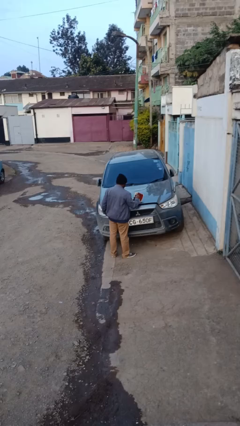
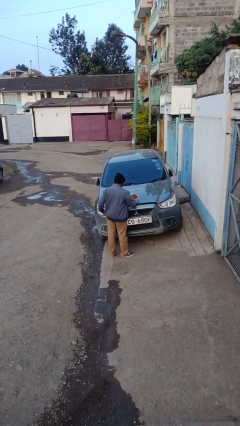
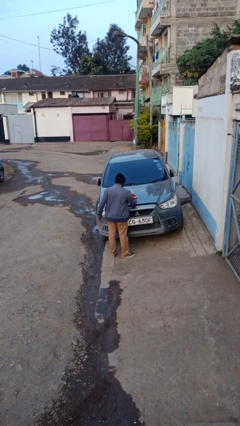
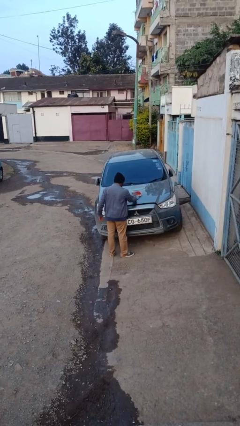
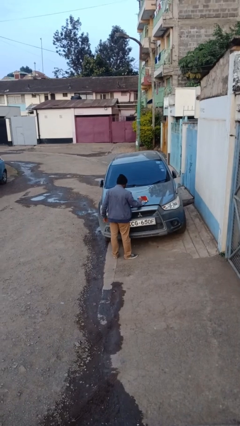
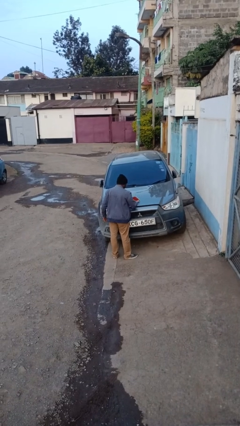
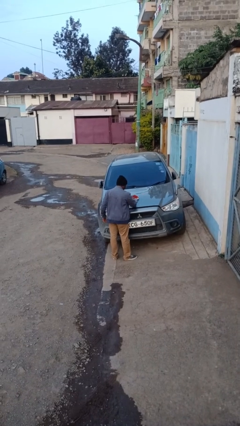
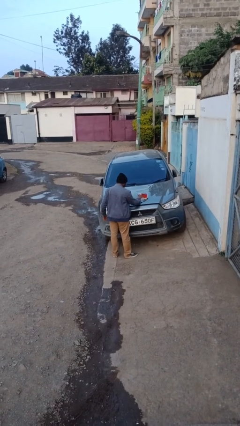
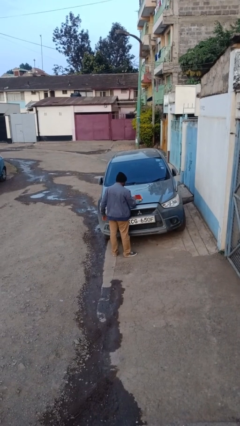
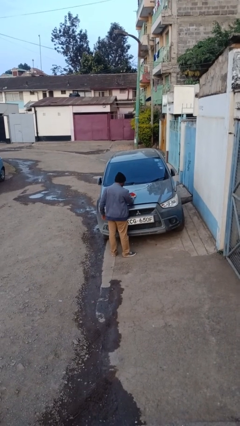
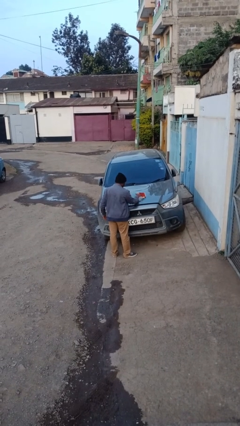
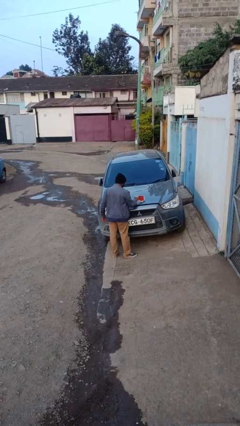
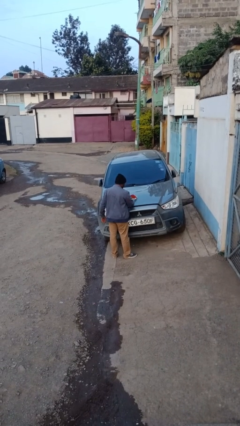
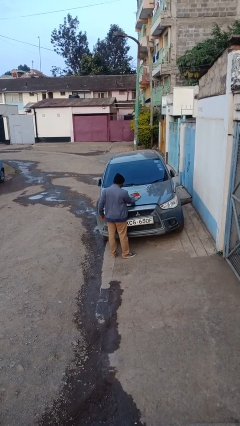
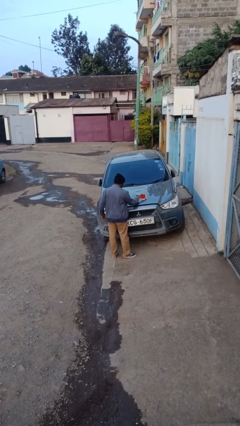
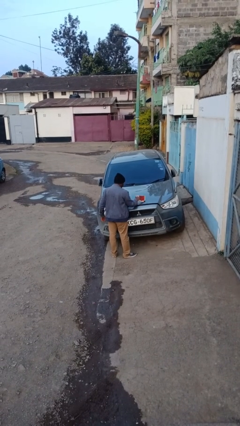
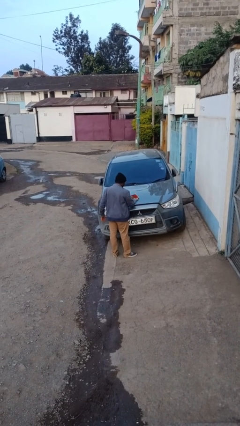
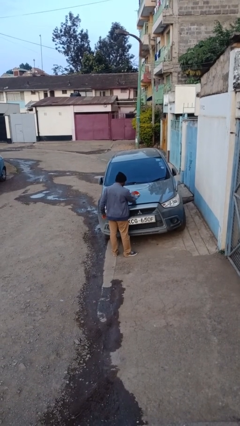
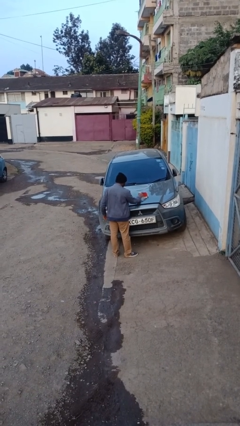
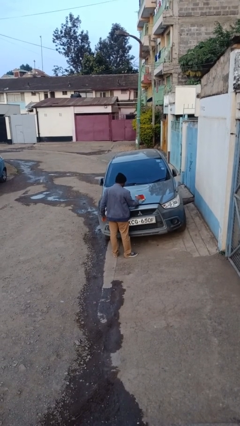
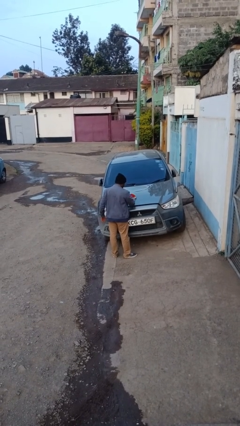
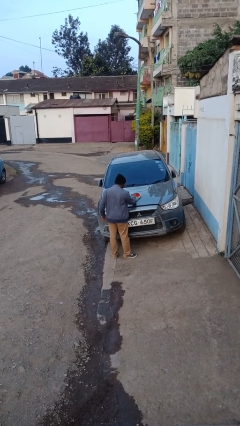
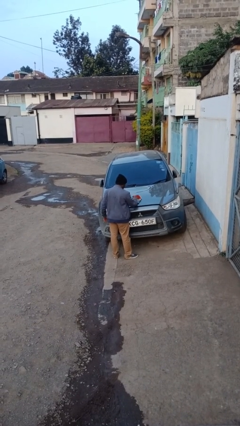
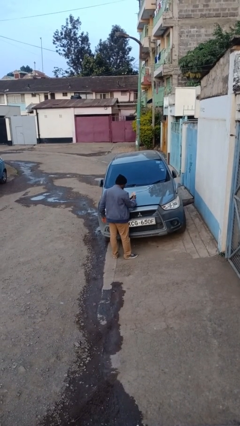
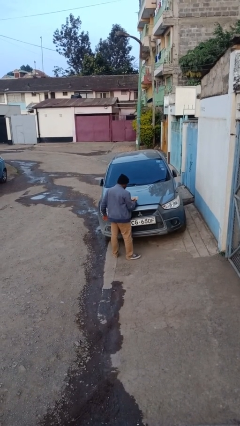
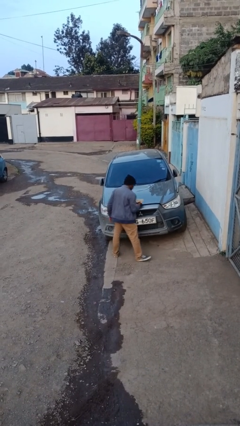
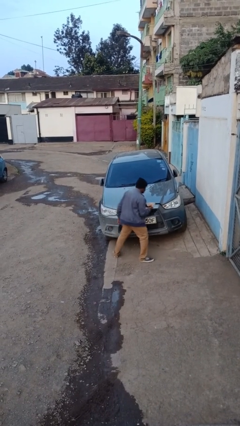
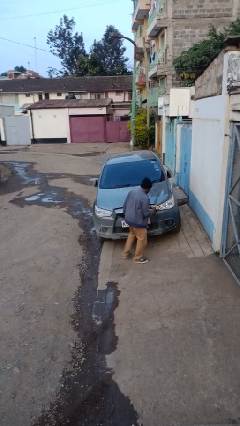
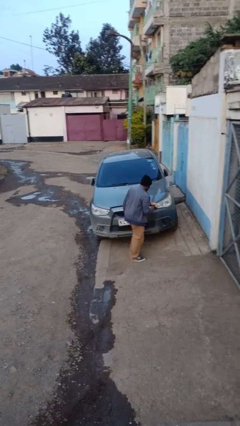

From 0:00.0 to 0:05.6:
person polishes car with rag

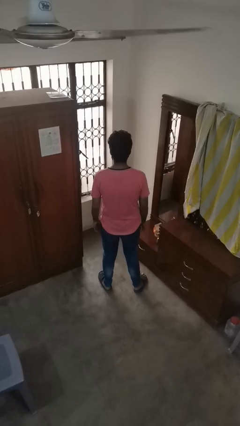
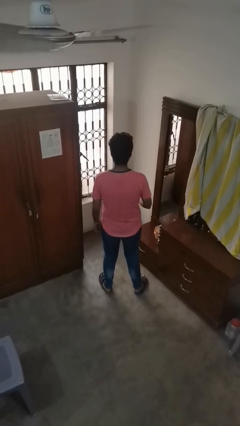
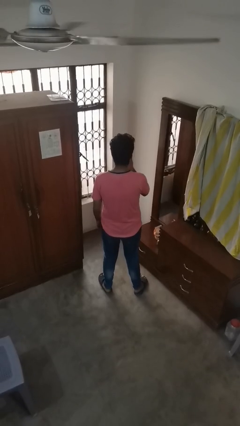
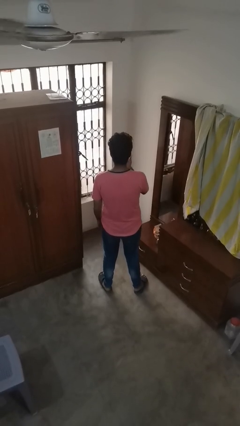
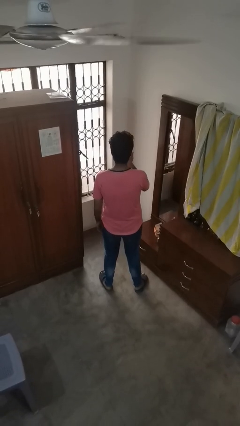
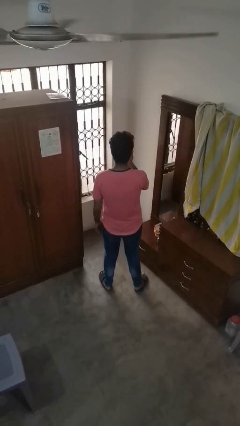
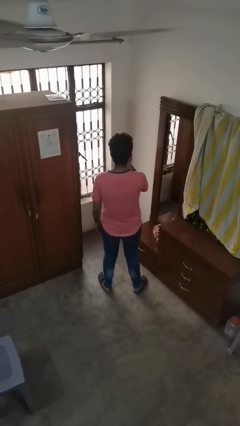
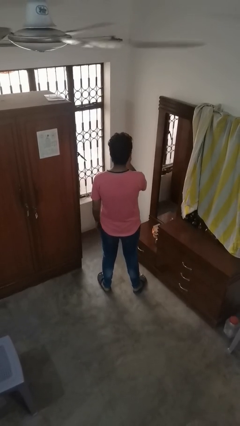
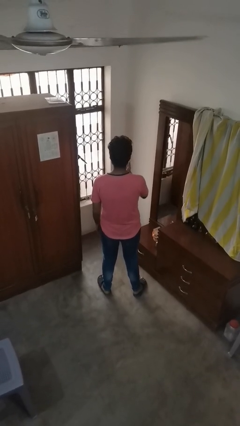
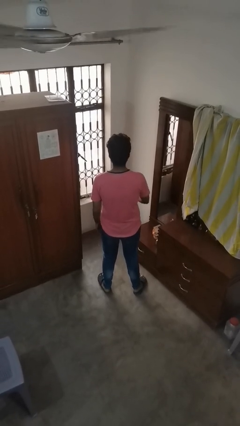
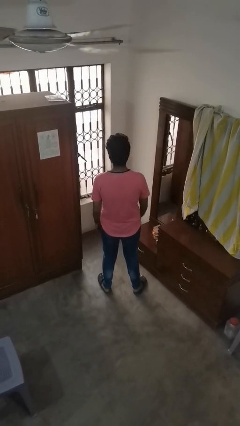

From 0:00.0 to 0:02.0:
person licks fingers

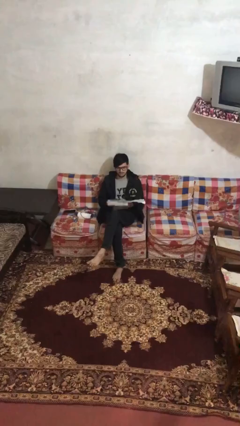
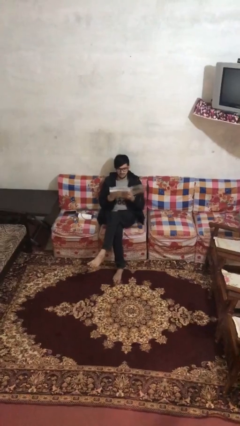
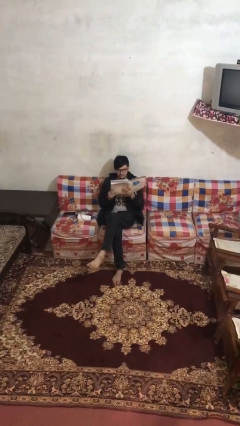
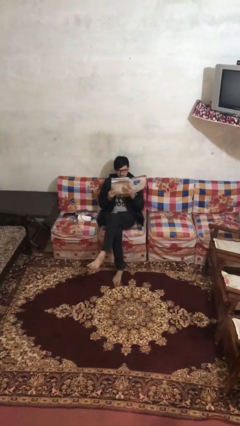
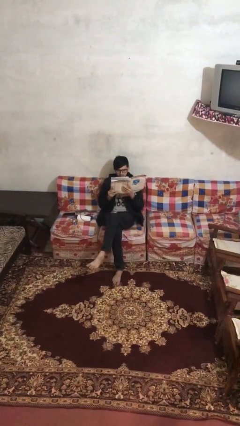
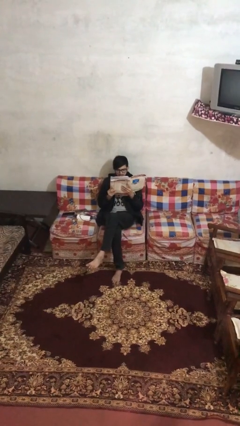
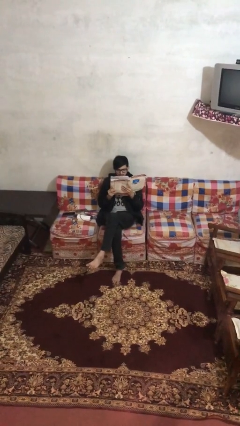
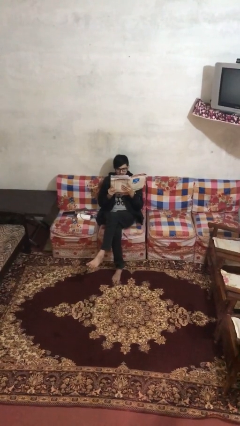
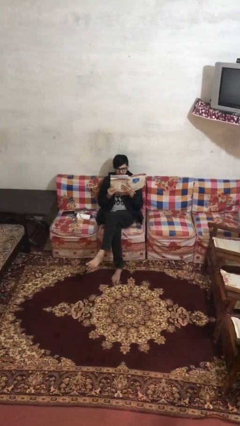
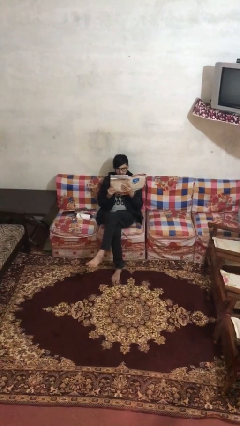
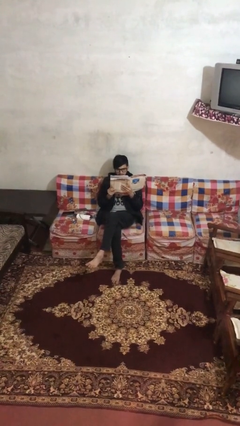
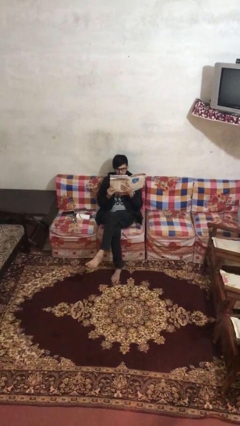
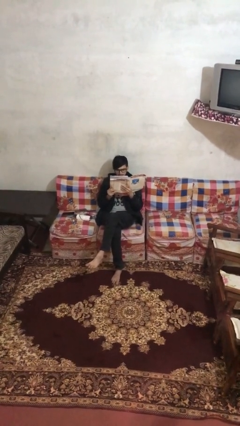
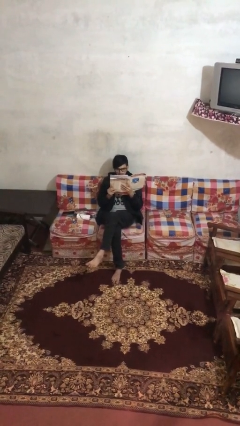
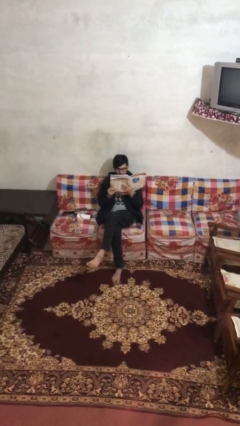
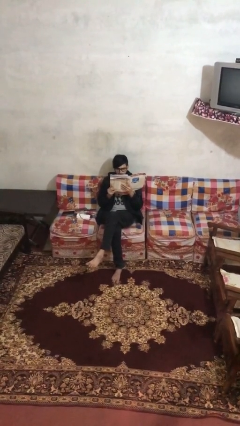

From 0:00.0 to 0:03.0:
person reads document

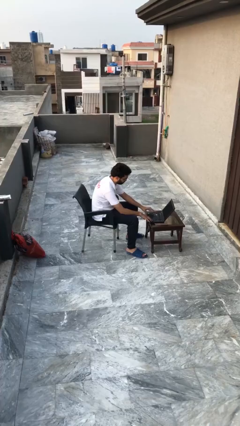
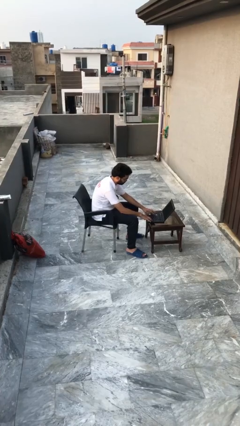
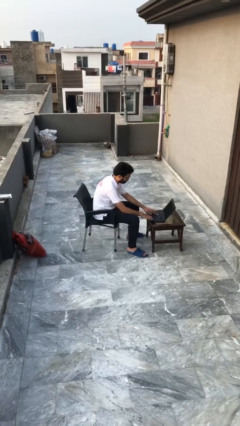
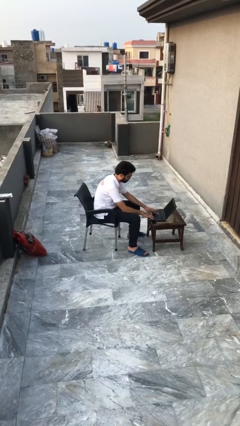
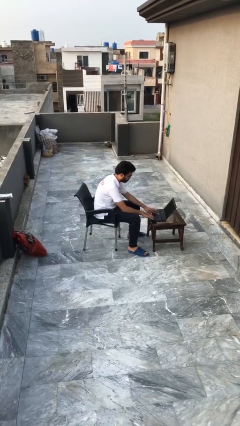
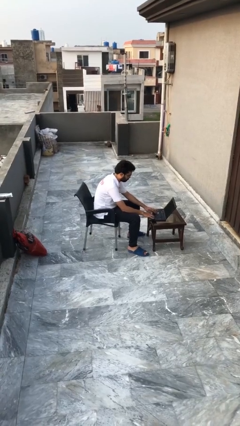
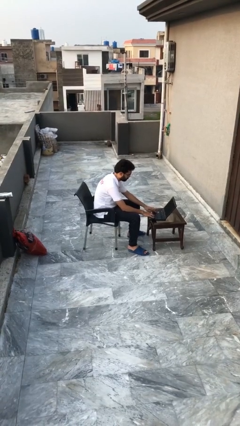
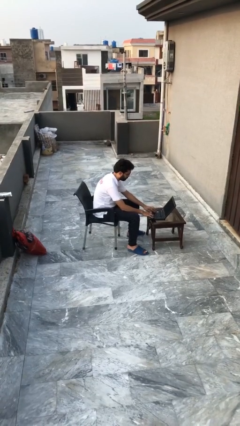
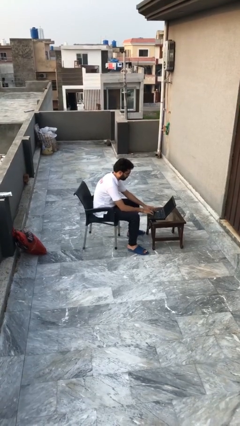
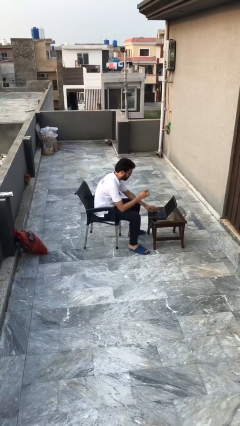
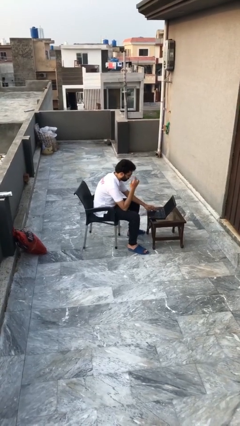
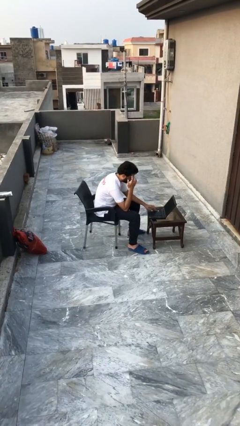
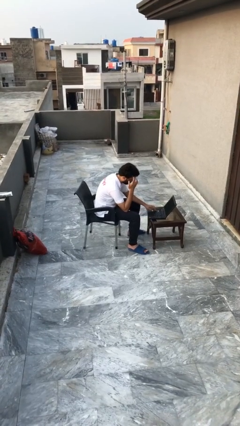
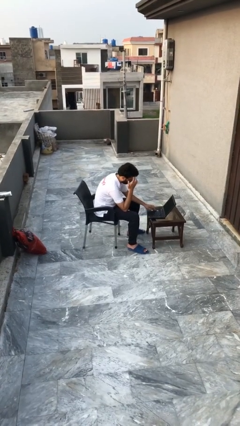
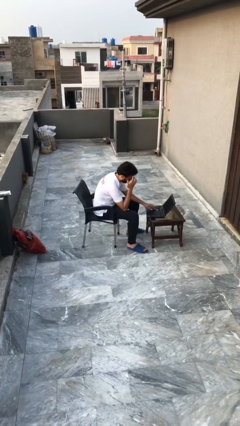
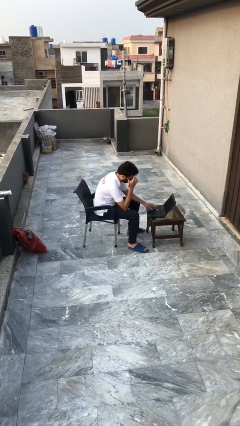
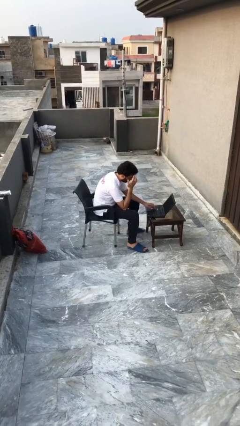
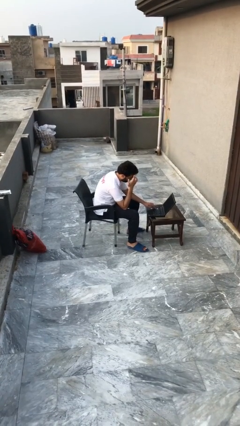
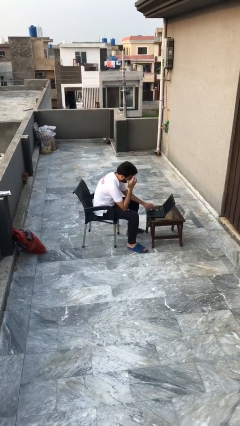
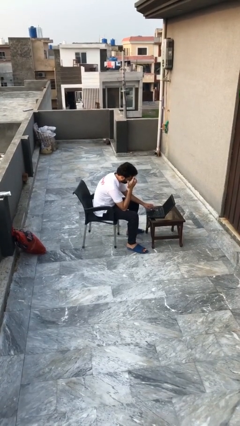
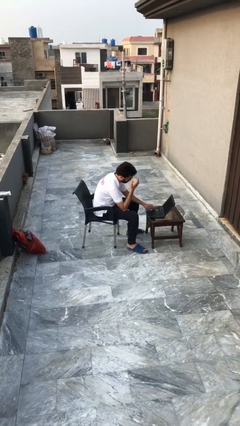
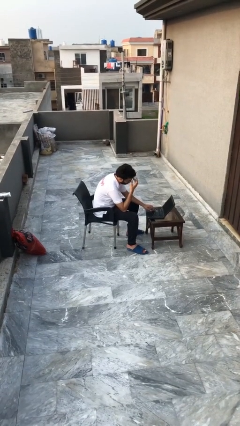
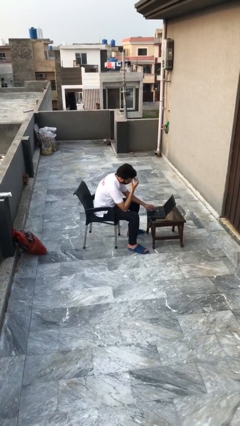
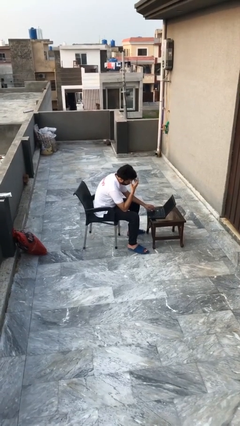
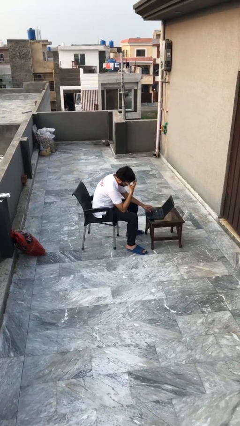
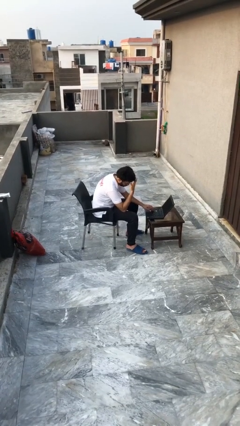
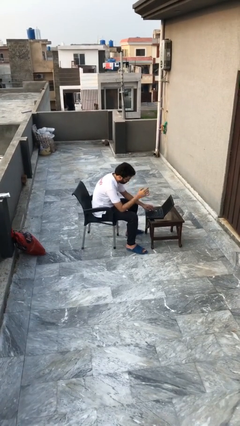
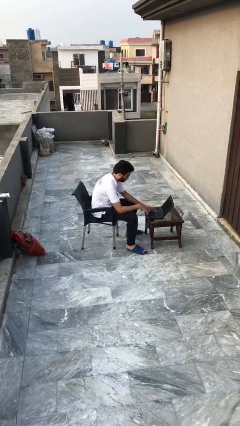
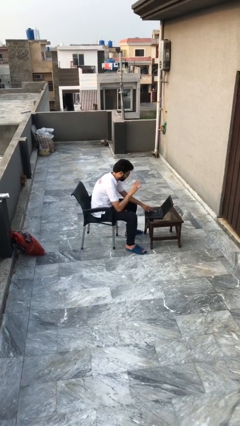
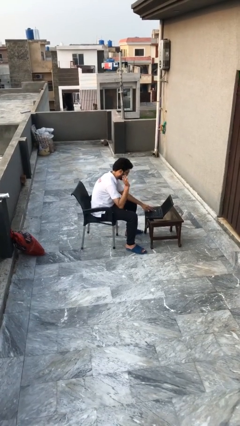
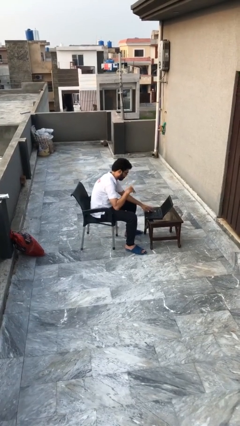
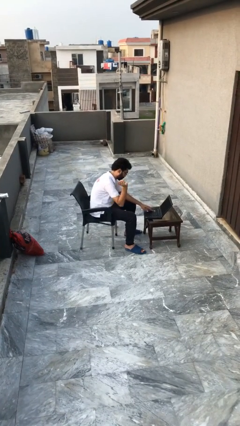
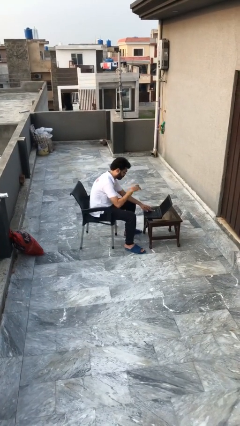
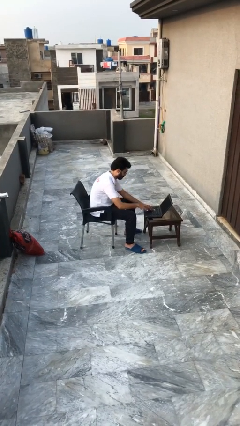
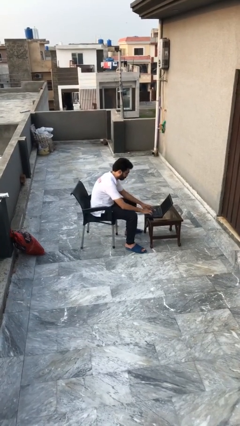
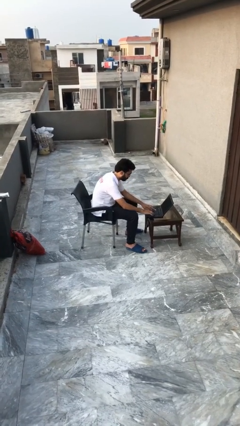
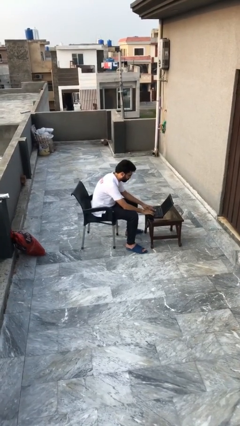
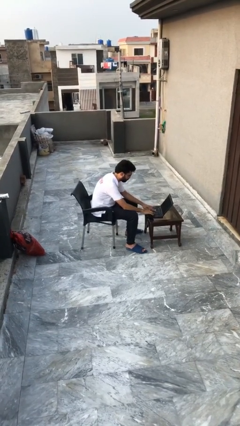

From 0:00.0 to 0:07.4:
person interacts with laptop
